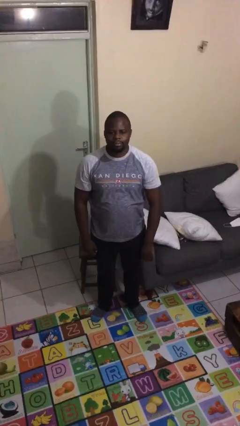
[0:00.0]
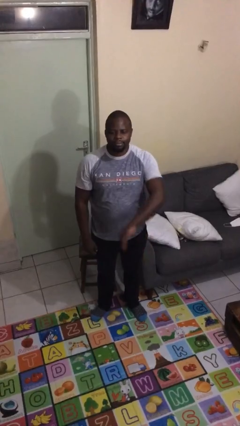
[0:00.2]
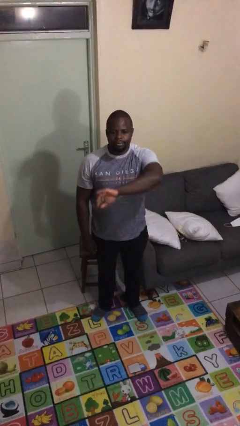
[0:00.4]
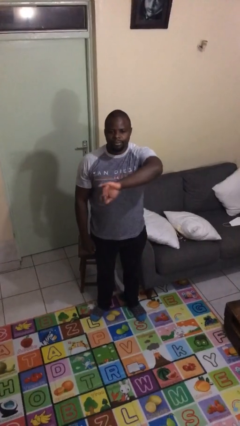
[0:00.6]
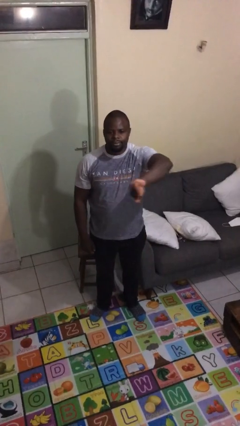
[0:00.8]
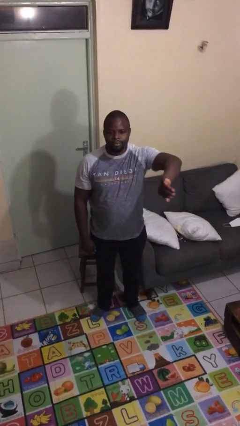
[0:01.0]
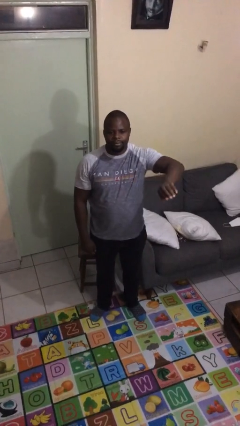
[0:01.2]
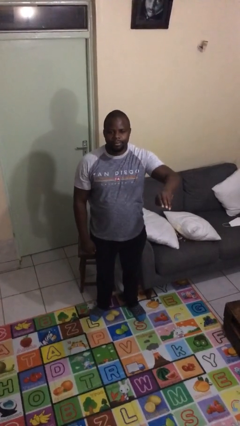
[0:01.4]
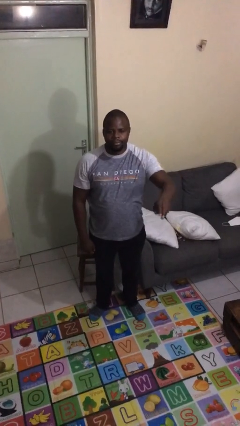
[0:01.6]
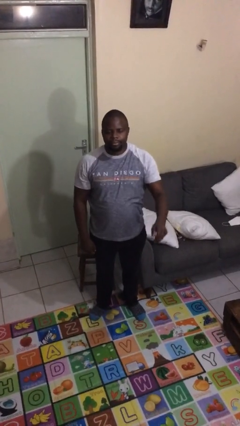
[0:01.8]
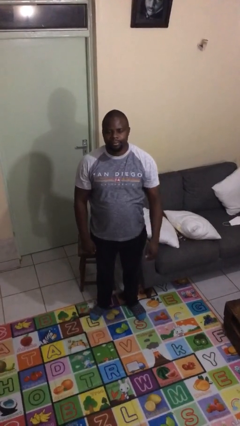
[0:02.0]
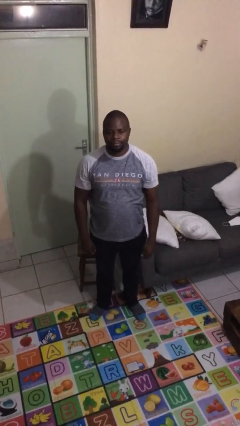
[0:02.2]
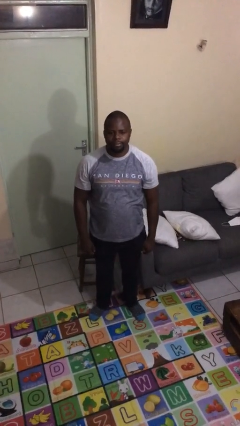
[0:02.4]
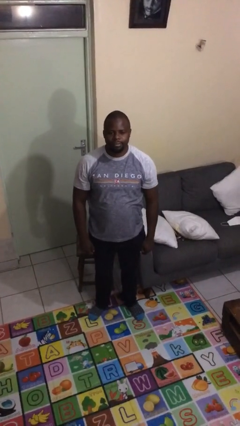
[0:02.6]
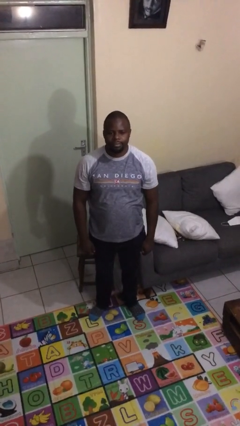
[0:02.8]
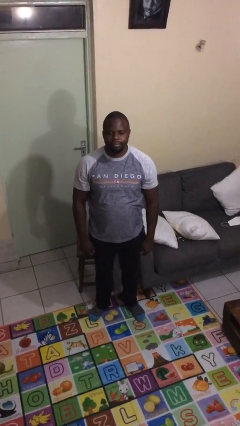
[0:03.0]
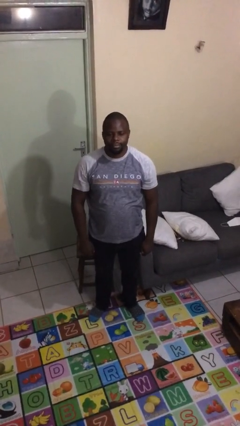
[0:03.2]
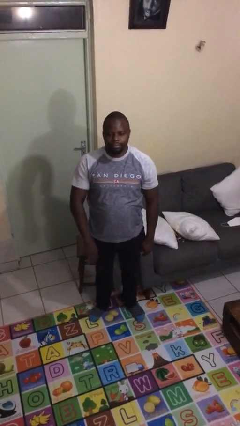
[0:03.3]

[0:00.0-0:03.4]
person gestures swipe left

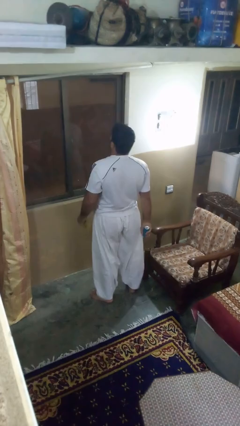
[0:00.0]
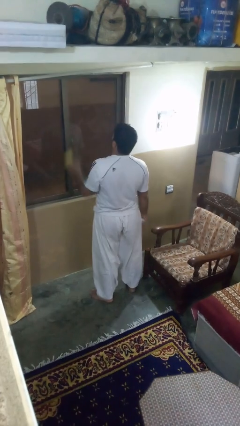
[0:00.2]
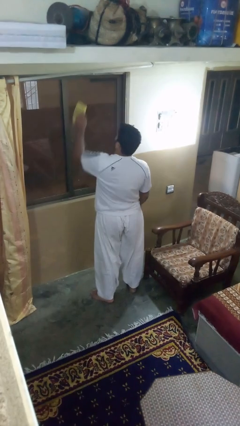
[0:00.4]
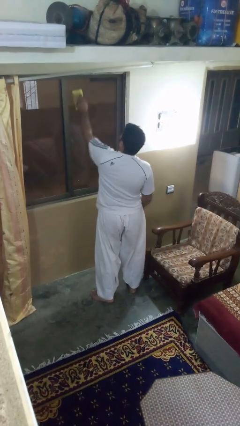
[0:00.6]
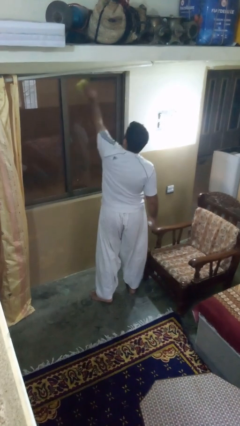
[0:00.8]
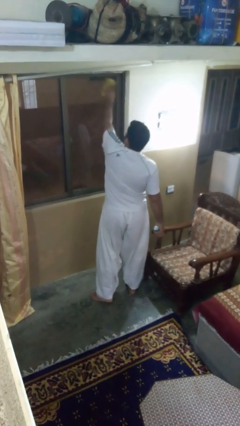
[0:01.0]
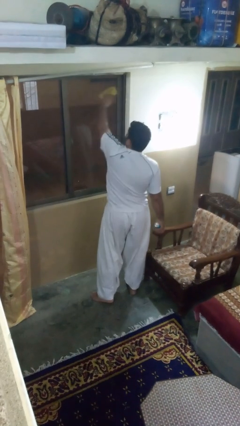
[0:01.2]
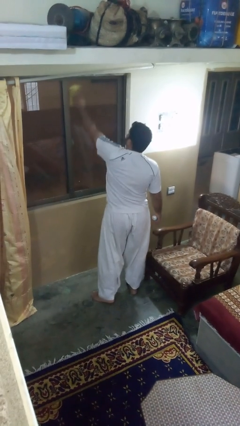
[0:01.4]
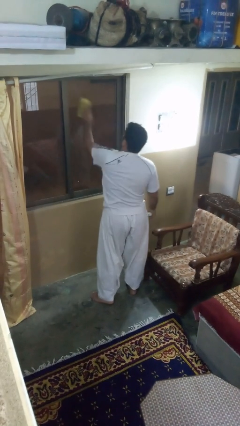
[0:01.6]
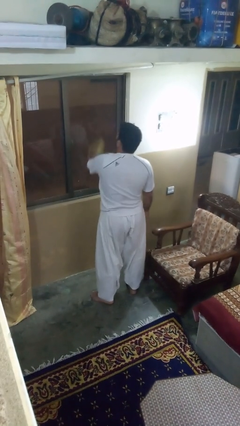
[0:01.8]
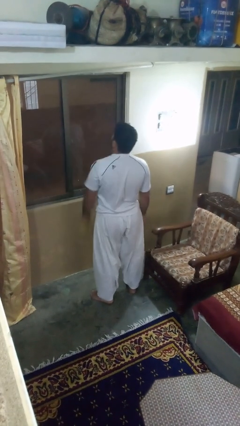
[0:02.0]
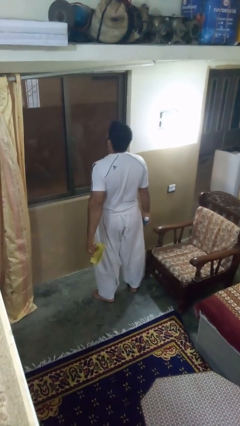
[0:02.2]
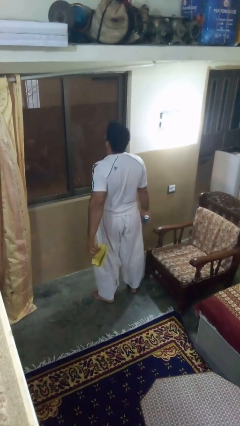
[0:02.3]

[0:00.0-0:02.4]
person washes window

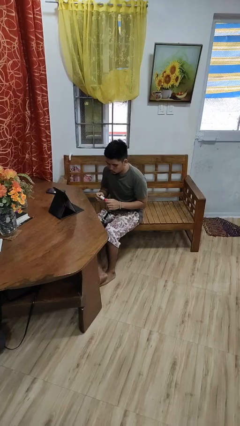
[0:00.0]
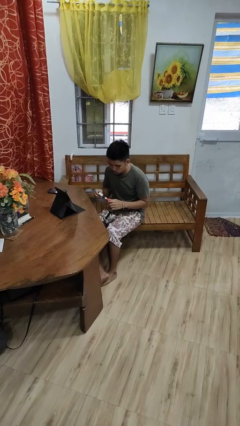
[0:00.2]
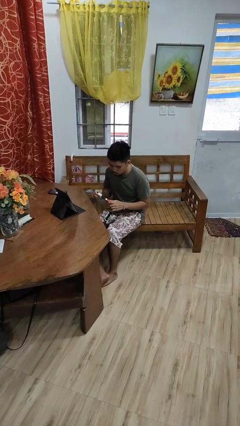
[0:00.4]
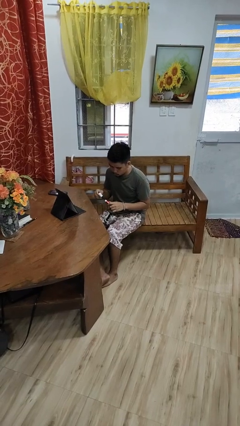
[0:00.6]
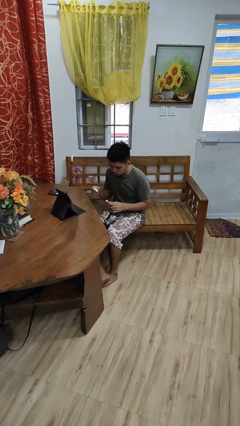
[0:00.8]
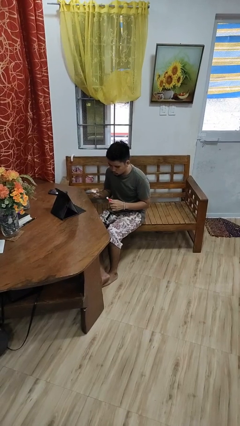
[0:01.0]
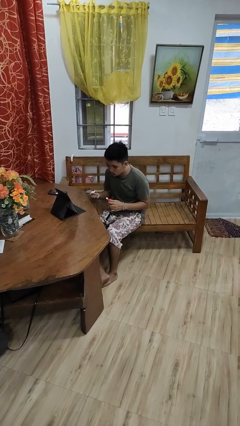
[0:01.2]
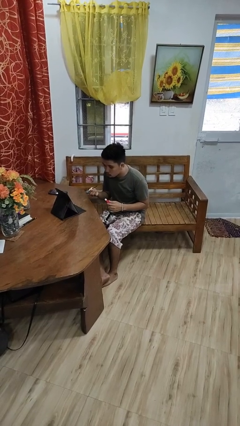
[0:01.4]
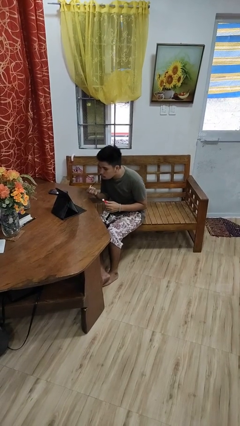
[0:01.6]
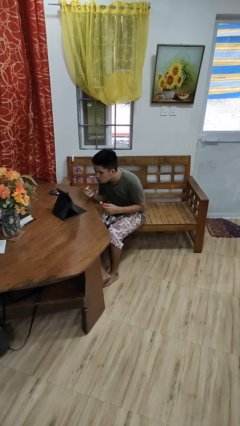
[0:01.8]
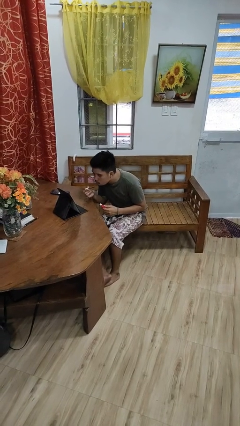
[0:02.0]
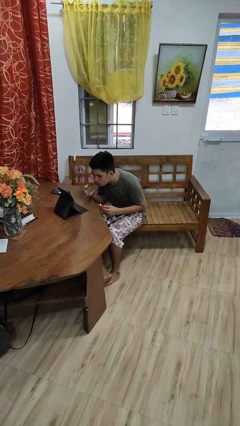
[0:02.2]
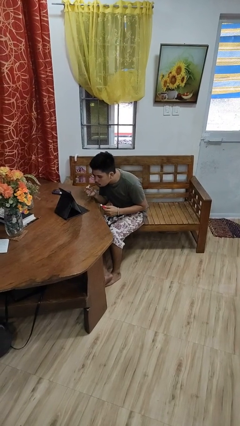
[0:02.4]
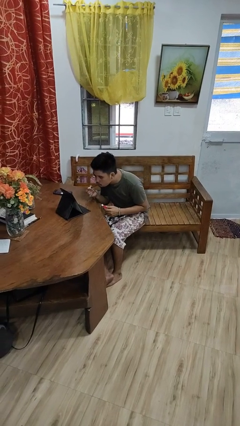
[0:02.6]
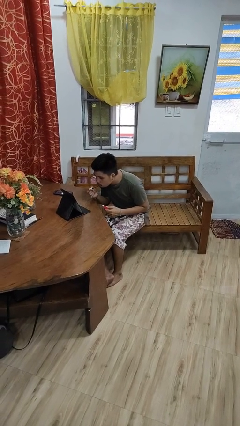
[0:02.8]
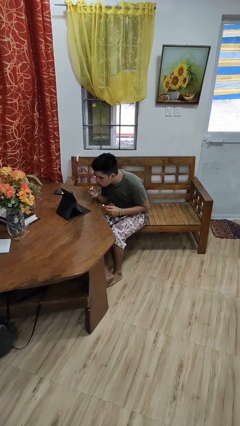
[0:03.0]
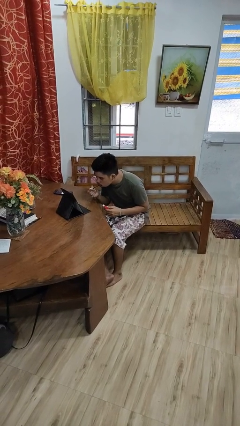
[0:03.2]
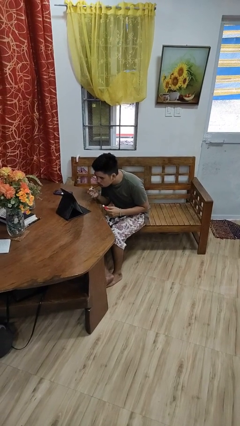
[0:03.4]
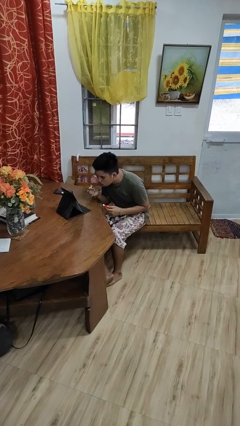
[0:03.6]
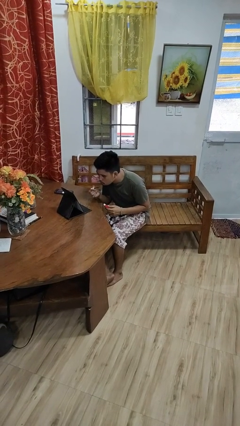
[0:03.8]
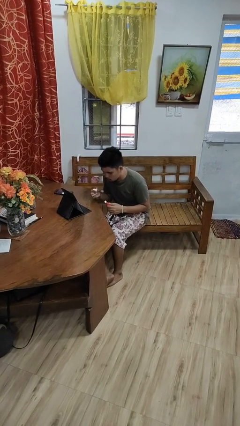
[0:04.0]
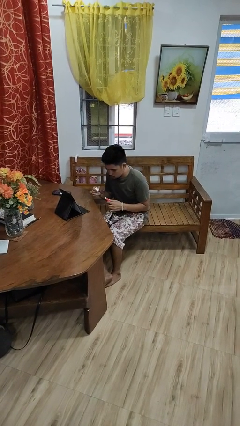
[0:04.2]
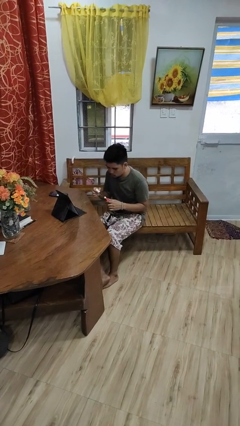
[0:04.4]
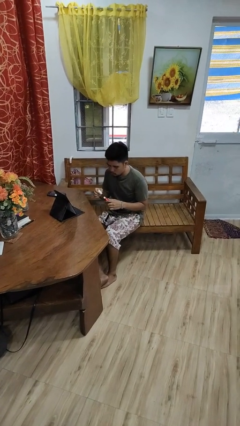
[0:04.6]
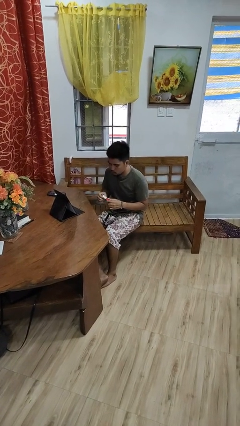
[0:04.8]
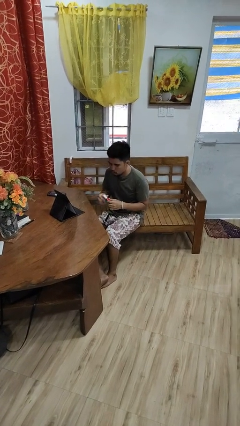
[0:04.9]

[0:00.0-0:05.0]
person applies lip makeup

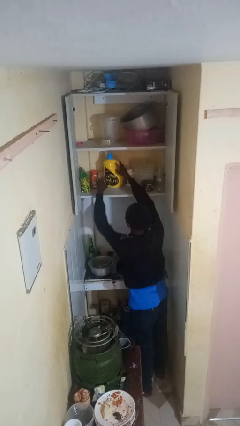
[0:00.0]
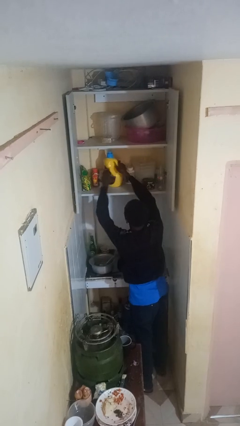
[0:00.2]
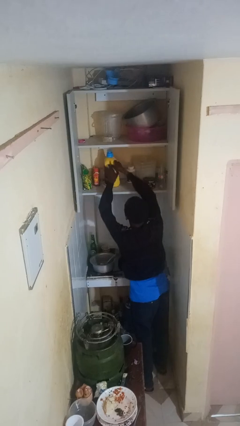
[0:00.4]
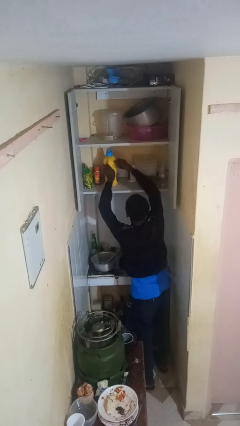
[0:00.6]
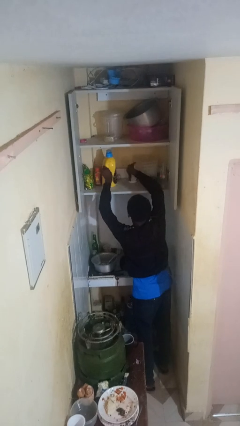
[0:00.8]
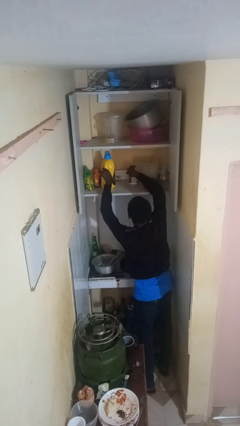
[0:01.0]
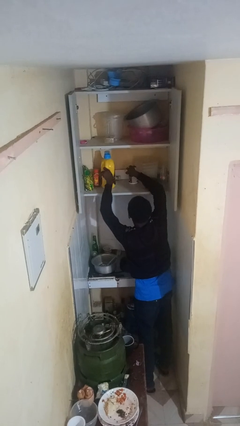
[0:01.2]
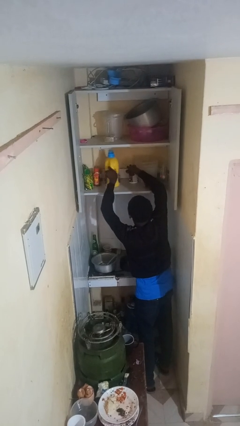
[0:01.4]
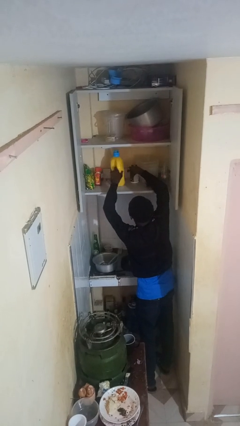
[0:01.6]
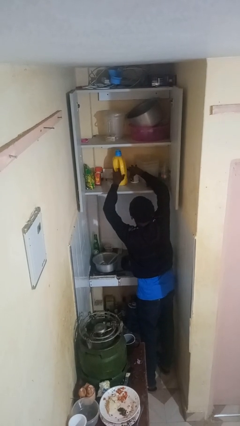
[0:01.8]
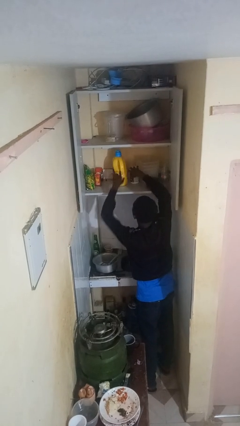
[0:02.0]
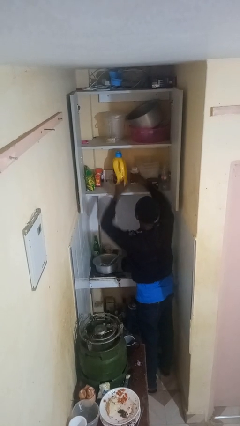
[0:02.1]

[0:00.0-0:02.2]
person searches in kitchen drawer

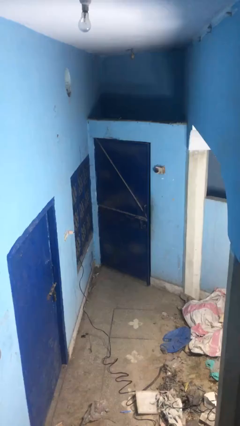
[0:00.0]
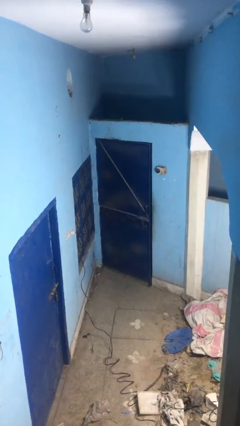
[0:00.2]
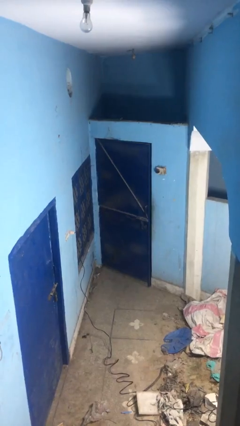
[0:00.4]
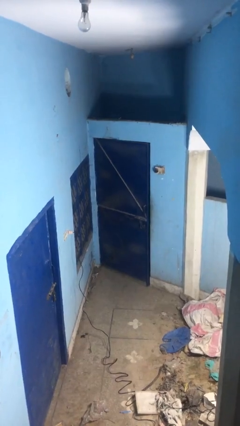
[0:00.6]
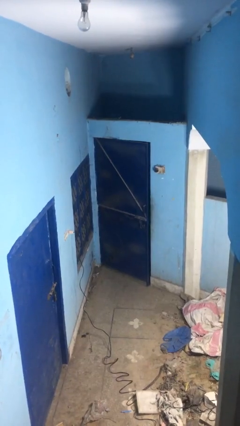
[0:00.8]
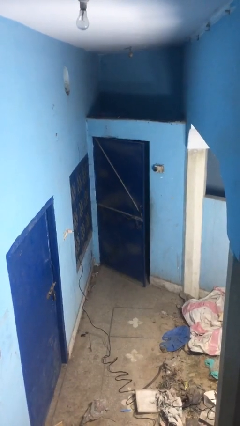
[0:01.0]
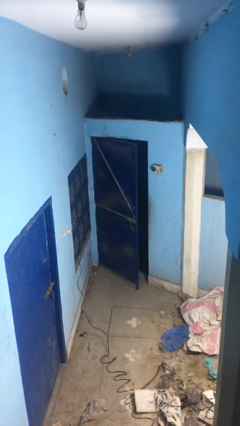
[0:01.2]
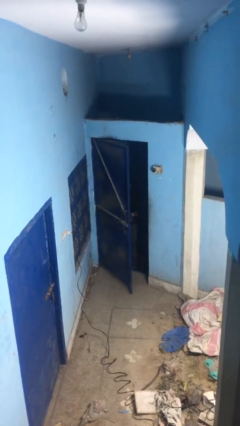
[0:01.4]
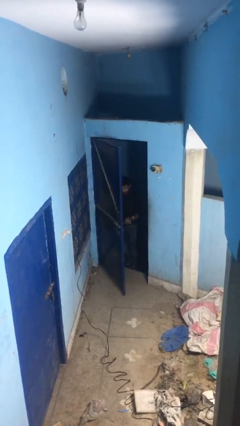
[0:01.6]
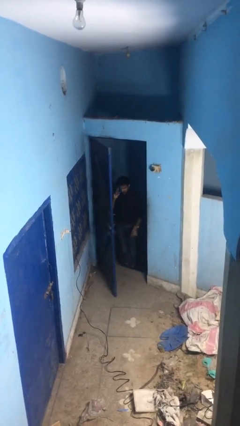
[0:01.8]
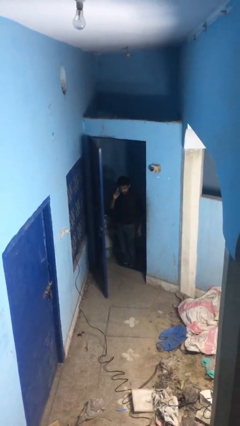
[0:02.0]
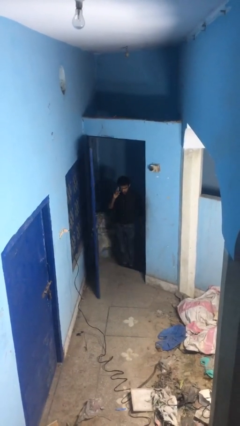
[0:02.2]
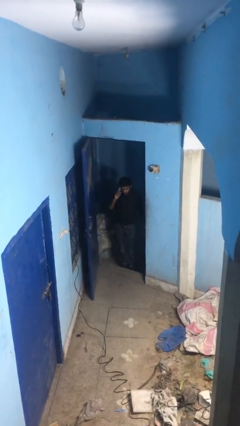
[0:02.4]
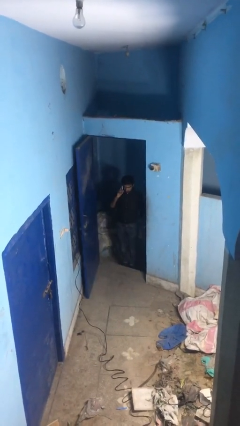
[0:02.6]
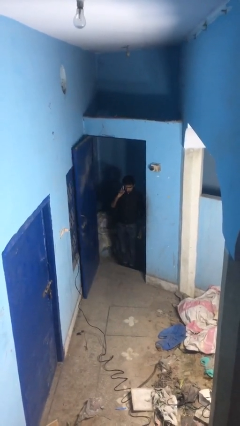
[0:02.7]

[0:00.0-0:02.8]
person opens facility door

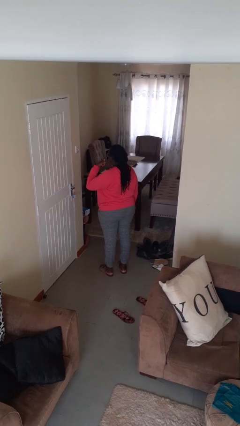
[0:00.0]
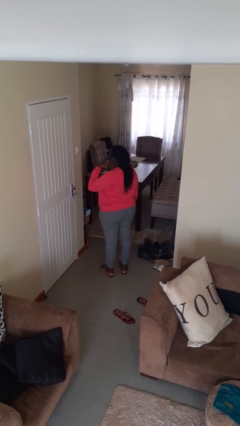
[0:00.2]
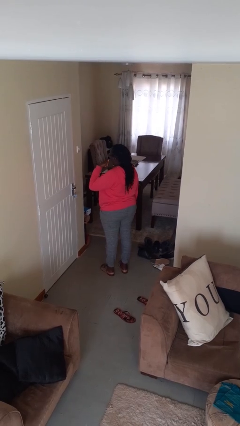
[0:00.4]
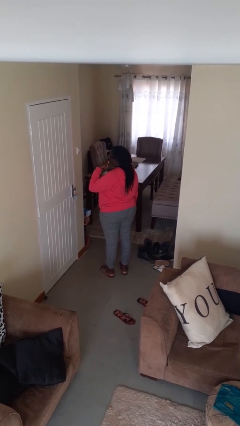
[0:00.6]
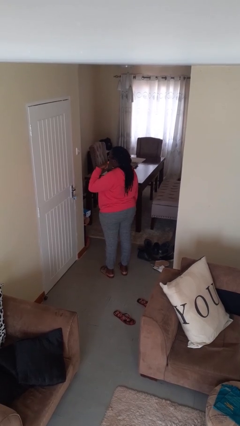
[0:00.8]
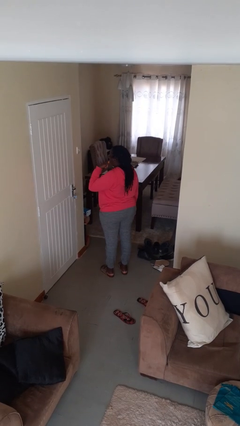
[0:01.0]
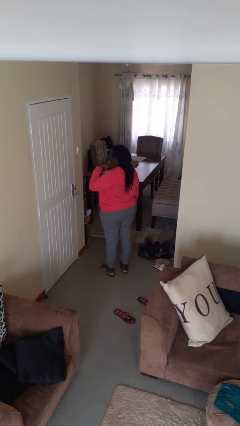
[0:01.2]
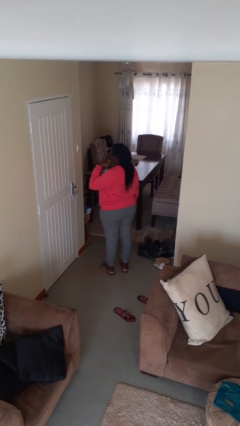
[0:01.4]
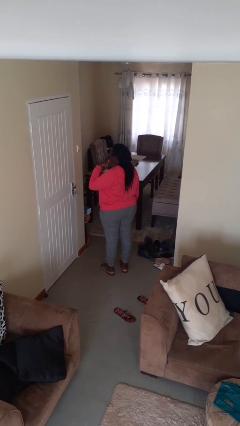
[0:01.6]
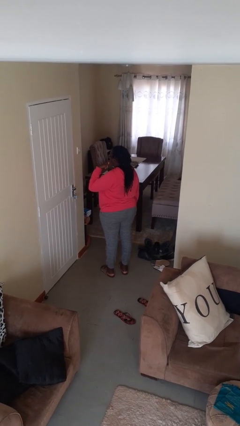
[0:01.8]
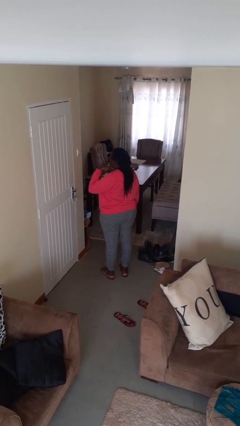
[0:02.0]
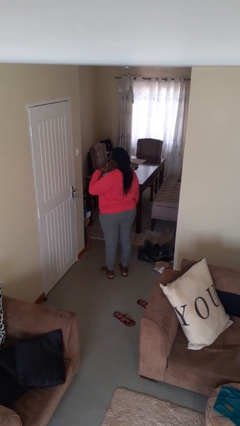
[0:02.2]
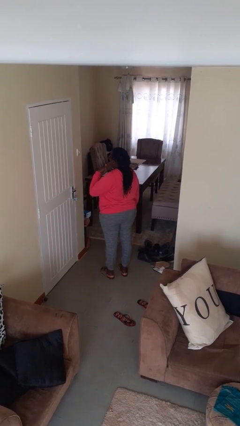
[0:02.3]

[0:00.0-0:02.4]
person gestures call me
